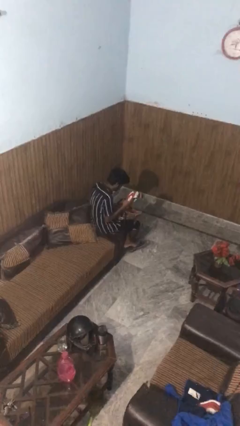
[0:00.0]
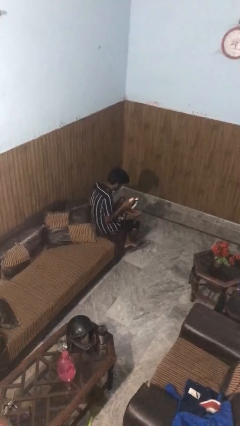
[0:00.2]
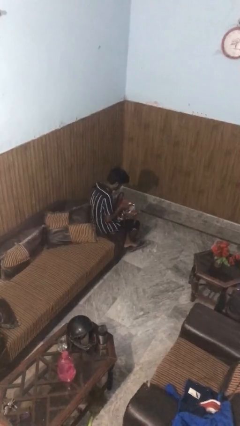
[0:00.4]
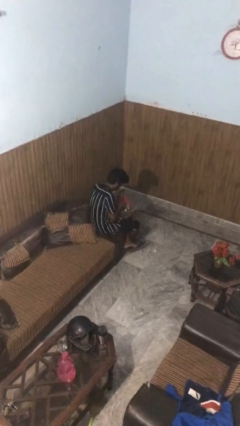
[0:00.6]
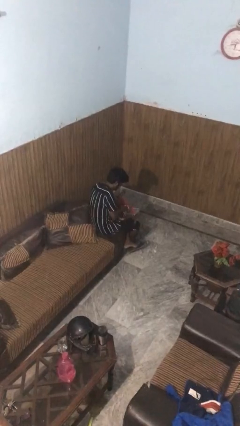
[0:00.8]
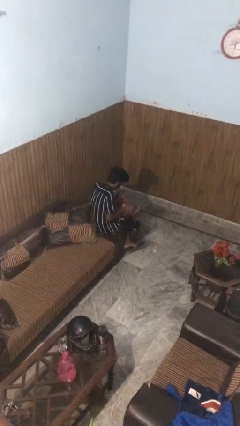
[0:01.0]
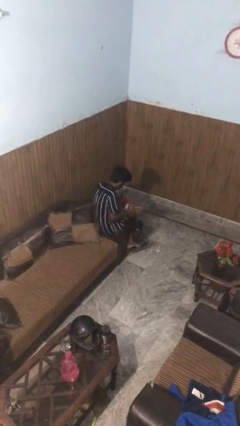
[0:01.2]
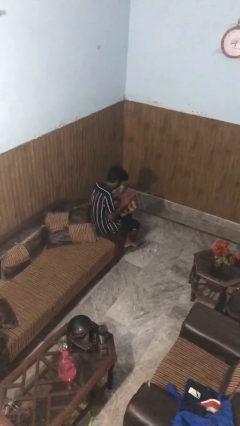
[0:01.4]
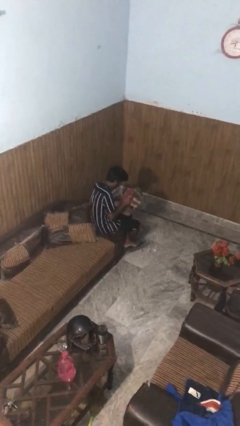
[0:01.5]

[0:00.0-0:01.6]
person puts object into purse

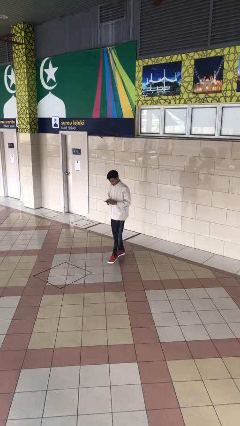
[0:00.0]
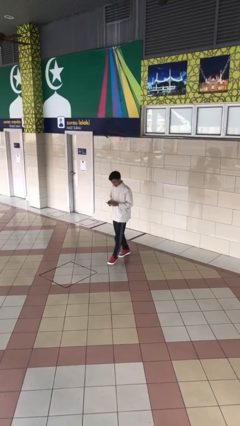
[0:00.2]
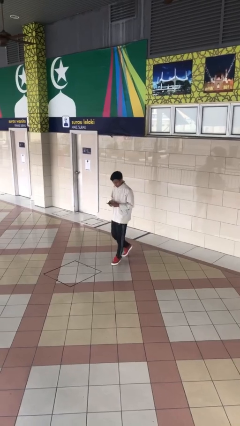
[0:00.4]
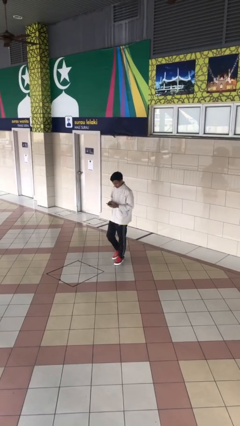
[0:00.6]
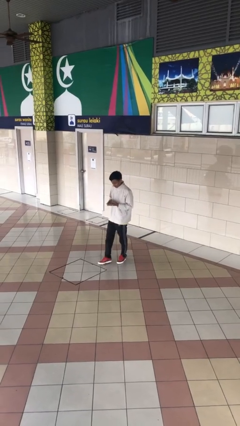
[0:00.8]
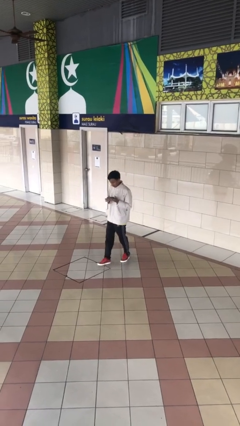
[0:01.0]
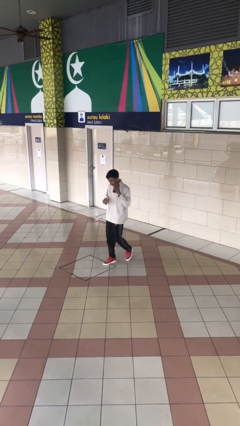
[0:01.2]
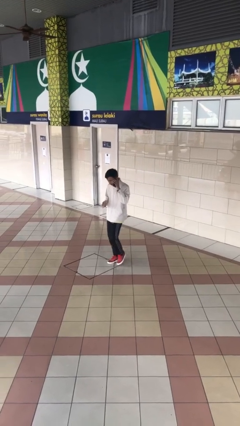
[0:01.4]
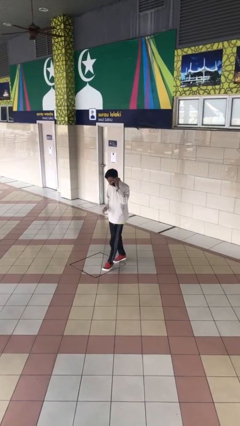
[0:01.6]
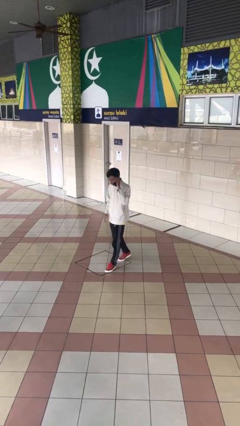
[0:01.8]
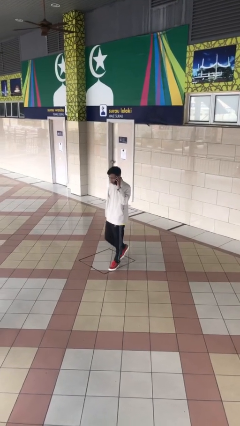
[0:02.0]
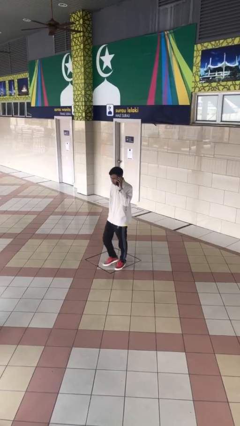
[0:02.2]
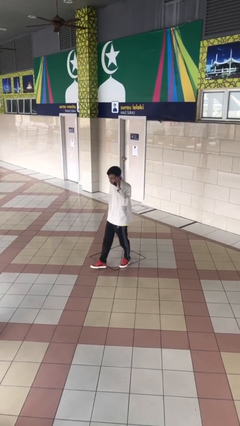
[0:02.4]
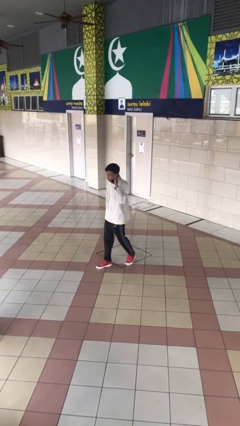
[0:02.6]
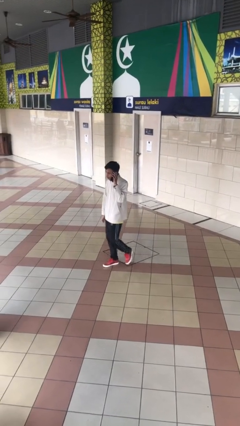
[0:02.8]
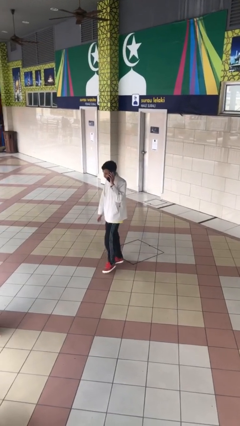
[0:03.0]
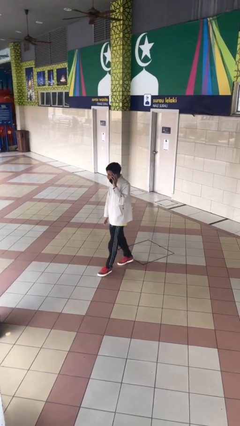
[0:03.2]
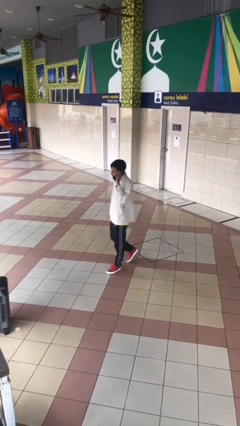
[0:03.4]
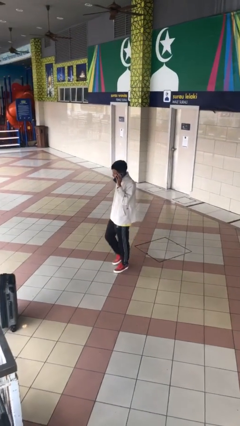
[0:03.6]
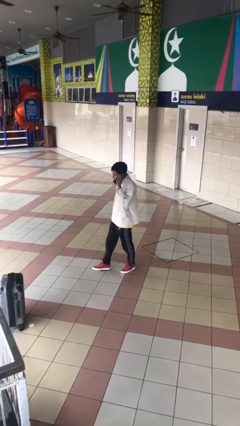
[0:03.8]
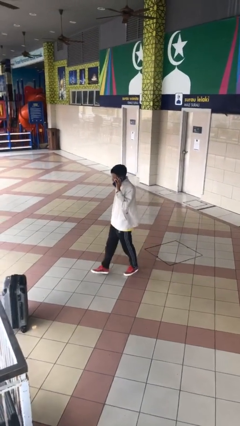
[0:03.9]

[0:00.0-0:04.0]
person talks on phone

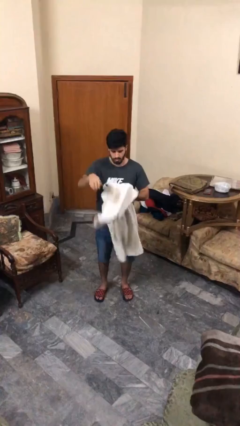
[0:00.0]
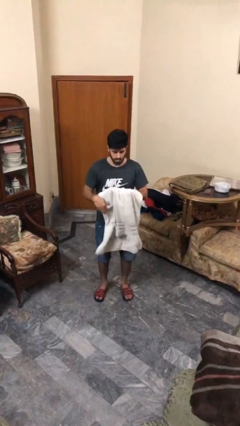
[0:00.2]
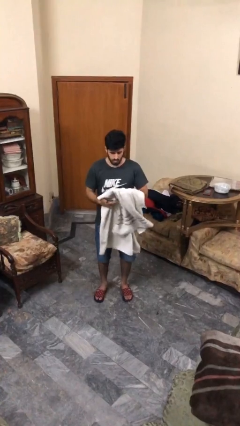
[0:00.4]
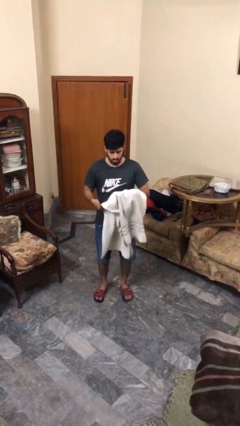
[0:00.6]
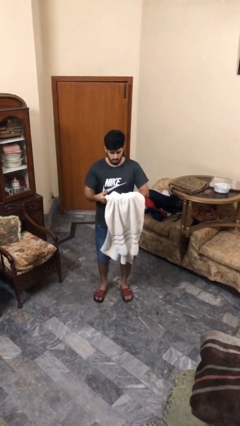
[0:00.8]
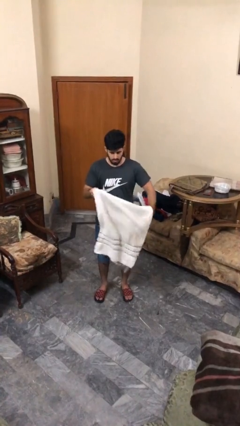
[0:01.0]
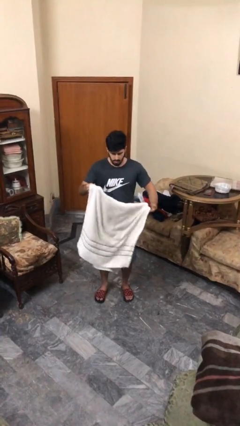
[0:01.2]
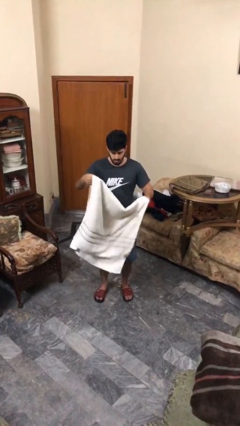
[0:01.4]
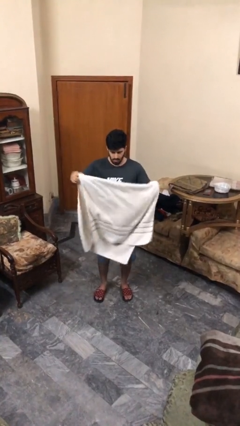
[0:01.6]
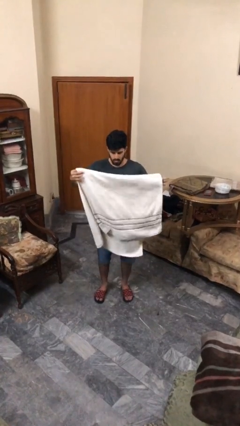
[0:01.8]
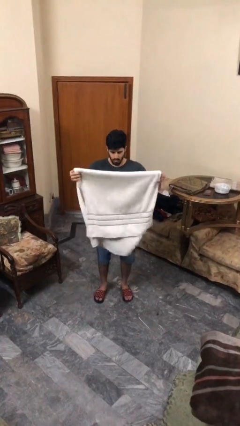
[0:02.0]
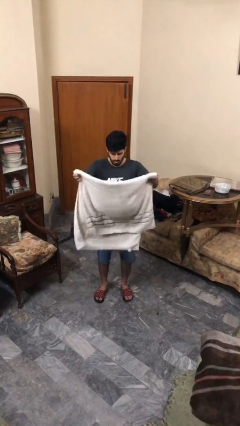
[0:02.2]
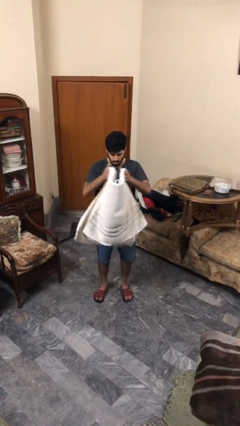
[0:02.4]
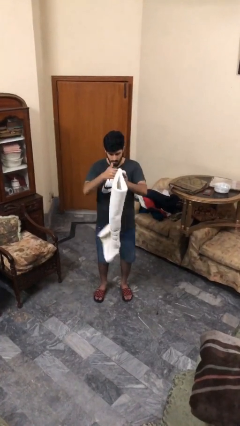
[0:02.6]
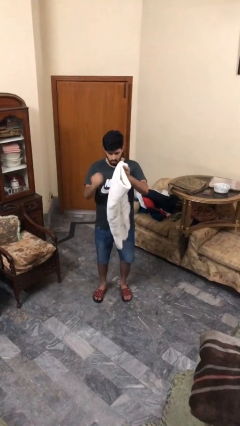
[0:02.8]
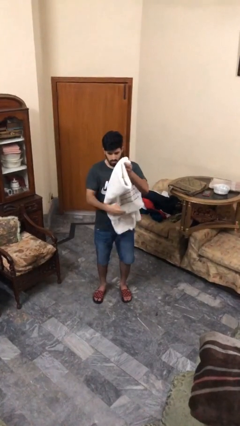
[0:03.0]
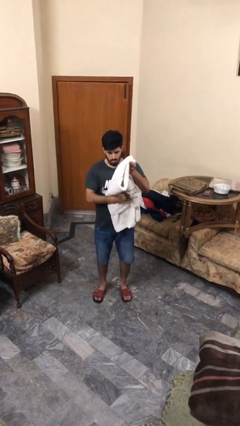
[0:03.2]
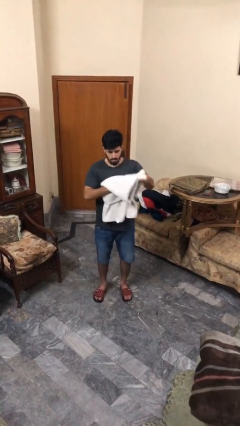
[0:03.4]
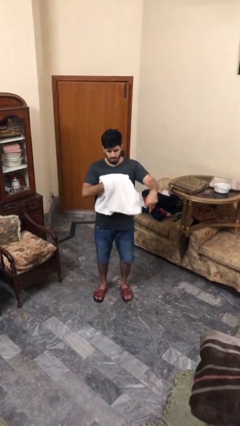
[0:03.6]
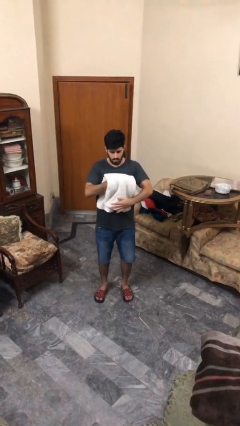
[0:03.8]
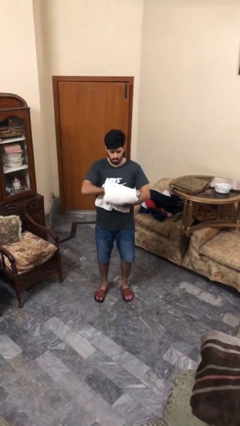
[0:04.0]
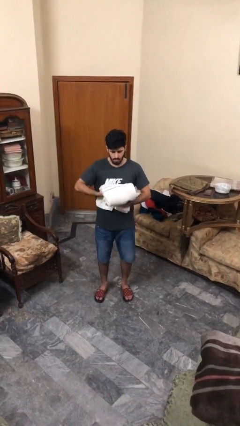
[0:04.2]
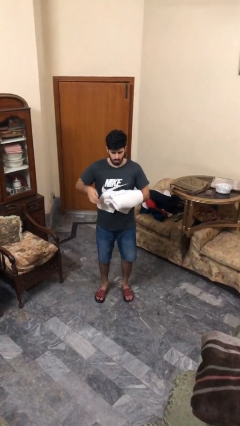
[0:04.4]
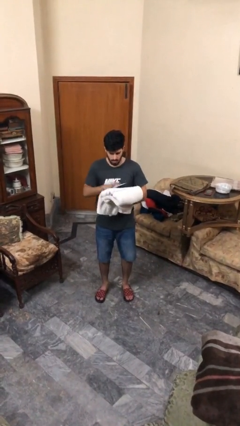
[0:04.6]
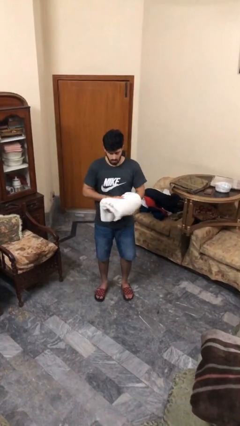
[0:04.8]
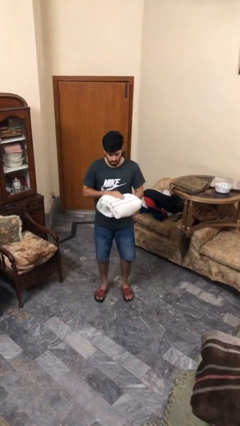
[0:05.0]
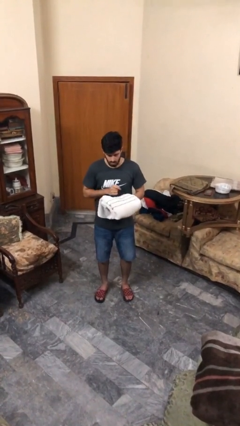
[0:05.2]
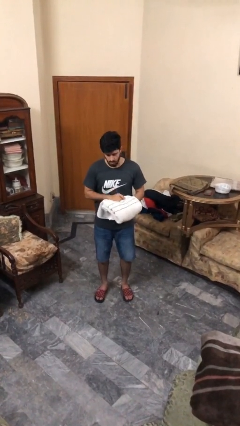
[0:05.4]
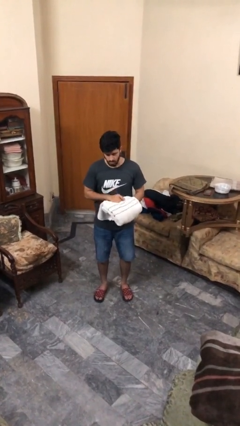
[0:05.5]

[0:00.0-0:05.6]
person folds towel

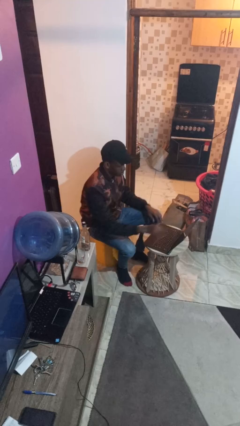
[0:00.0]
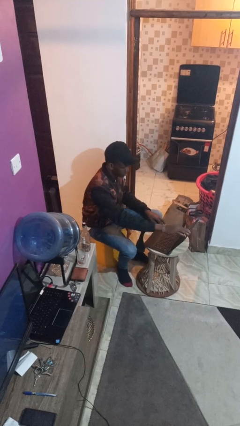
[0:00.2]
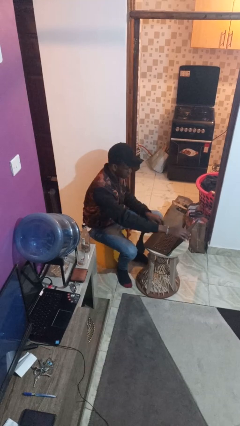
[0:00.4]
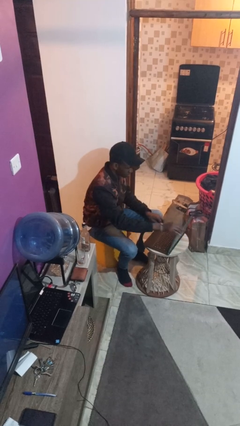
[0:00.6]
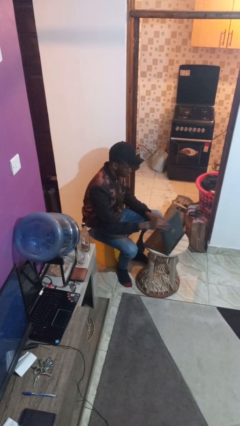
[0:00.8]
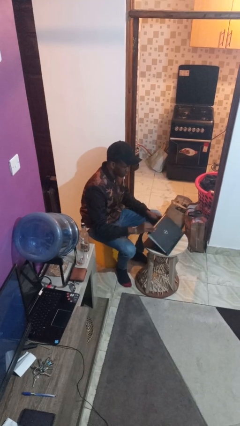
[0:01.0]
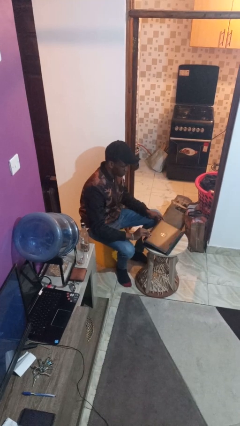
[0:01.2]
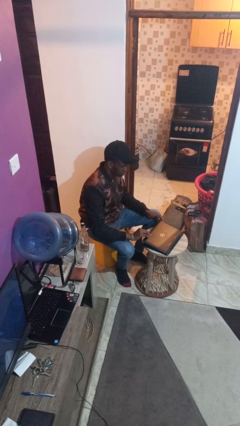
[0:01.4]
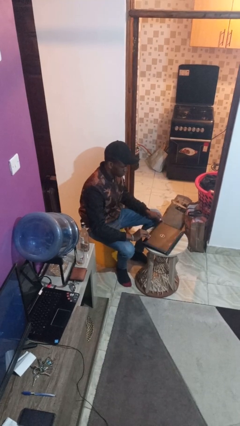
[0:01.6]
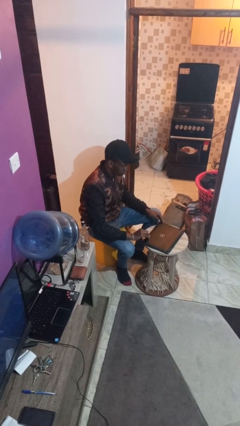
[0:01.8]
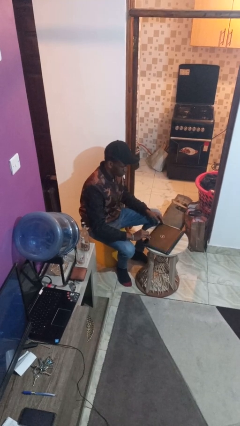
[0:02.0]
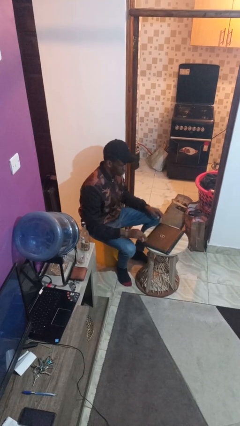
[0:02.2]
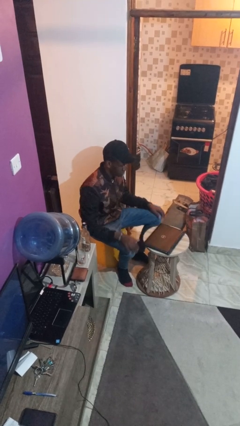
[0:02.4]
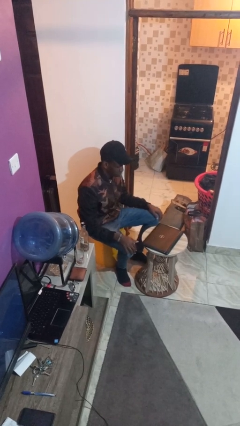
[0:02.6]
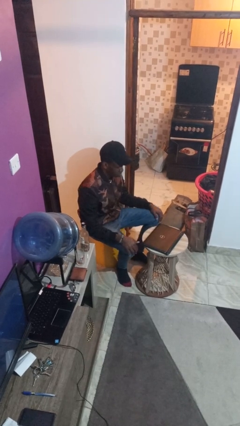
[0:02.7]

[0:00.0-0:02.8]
person closes laptop

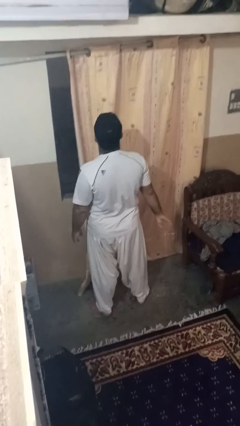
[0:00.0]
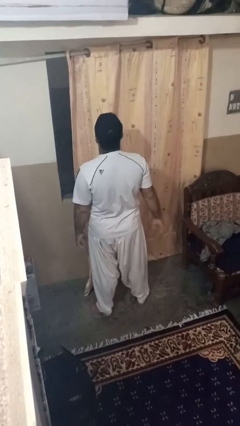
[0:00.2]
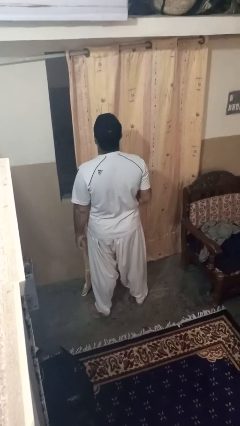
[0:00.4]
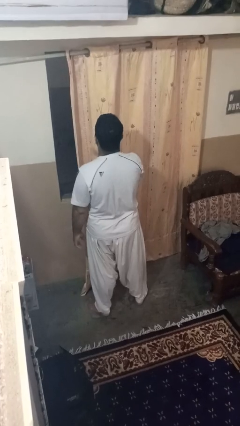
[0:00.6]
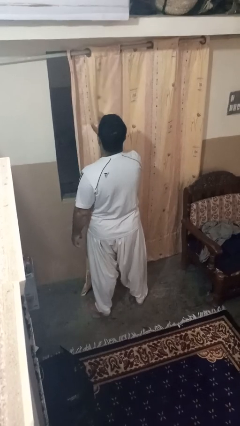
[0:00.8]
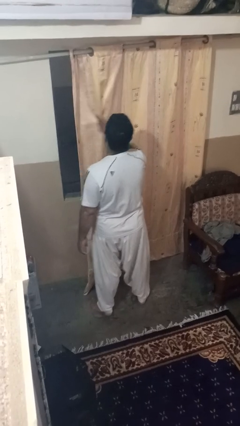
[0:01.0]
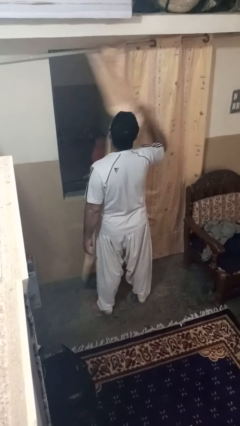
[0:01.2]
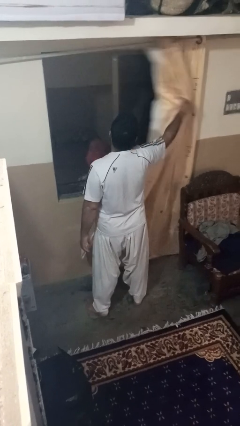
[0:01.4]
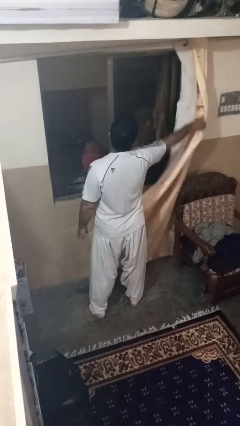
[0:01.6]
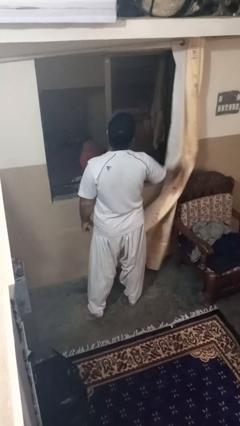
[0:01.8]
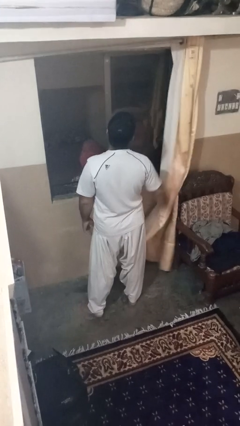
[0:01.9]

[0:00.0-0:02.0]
person opens curtains

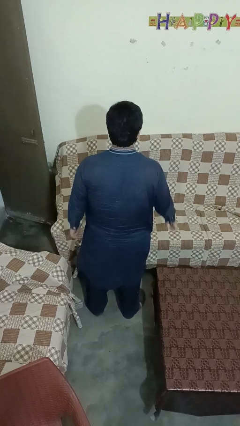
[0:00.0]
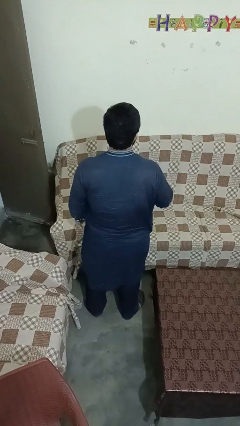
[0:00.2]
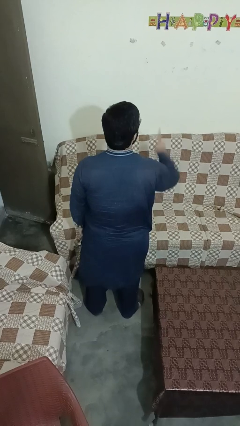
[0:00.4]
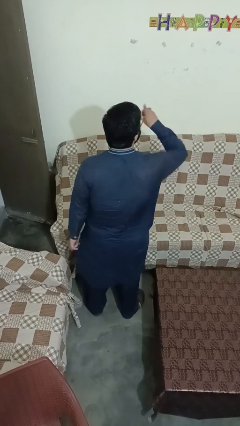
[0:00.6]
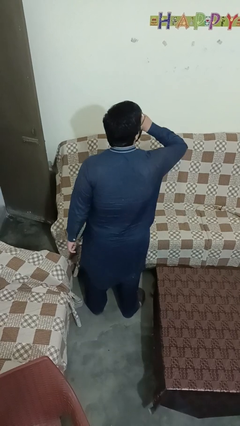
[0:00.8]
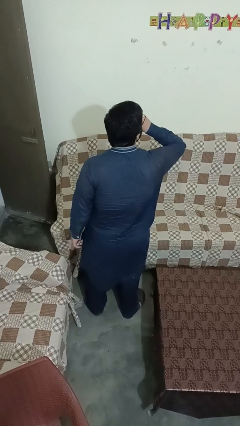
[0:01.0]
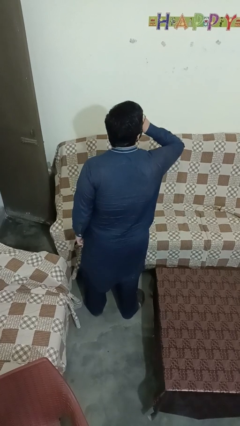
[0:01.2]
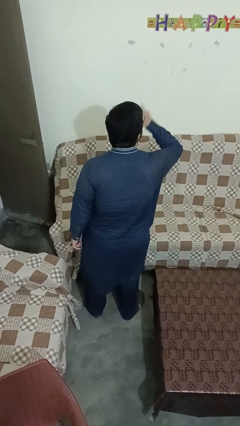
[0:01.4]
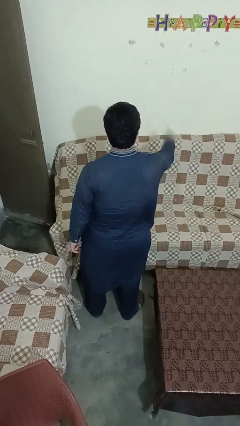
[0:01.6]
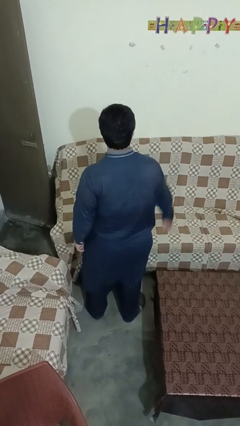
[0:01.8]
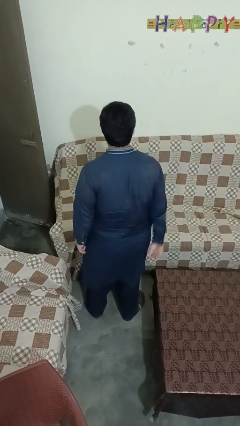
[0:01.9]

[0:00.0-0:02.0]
person gestures be quiet
